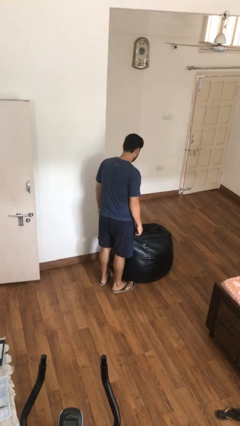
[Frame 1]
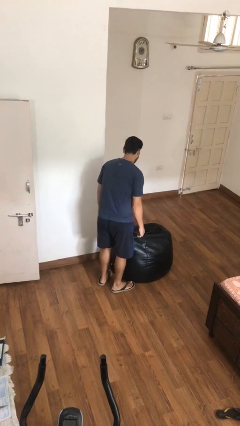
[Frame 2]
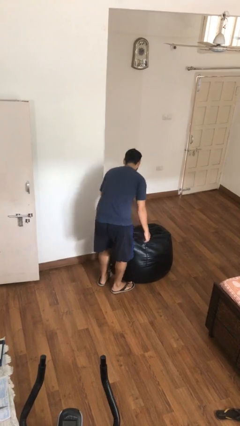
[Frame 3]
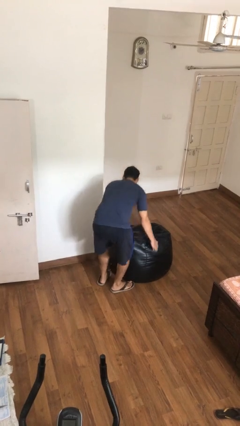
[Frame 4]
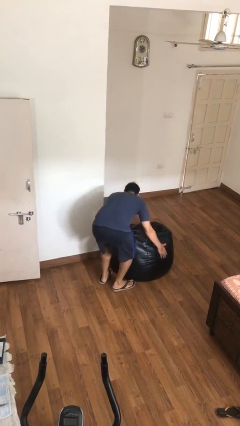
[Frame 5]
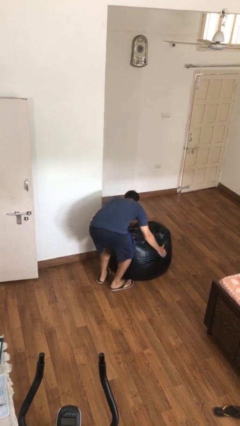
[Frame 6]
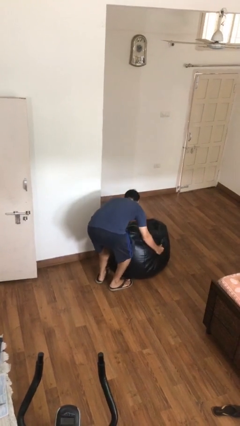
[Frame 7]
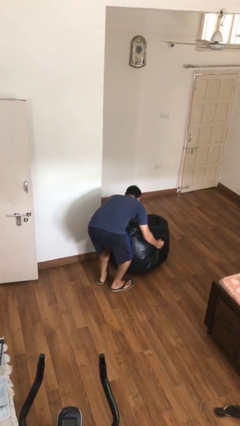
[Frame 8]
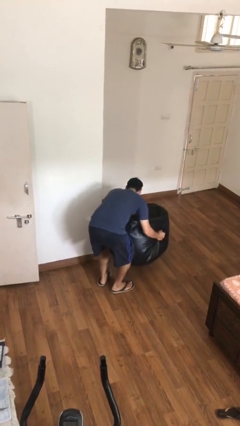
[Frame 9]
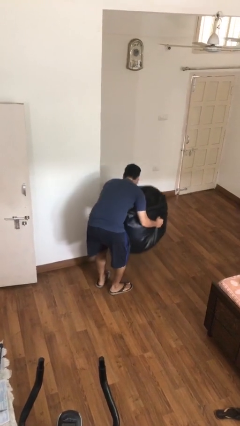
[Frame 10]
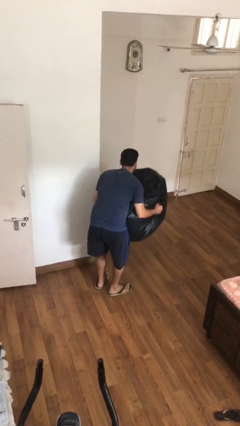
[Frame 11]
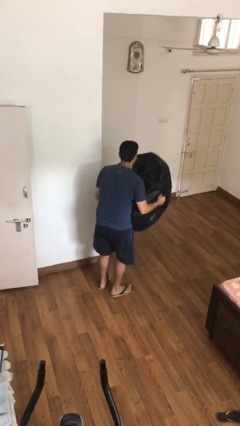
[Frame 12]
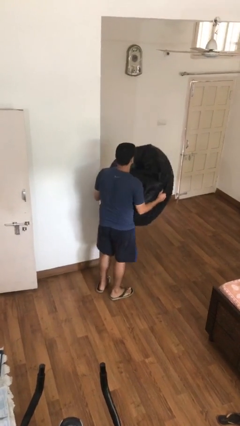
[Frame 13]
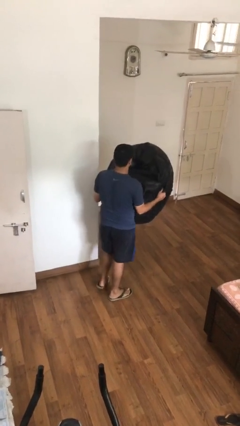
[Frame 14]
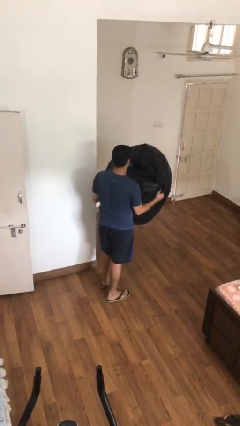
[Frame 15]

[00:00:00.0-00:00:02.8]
person picks up object from floor

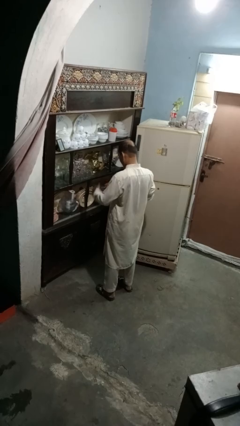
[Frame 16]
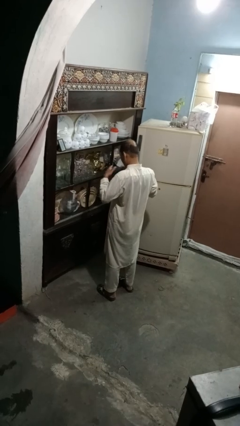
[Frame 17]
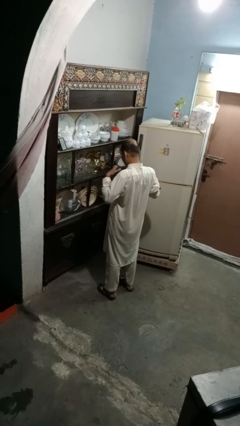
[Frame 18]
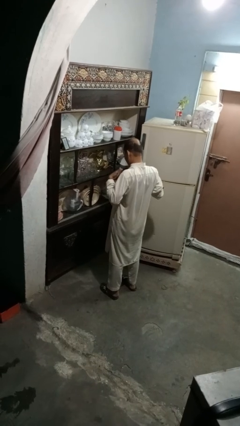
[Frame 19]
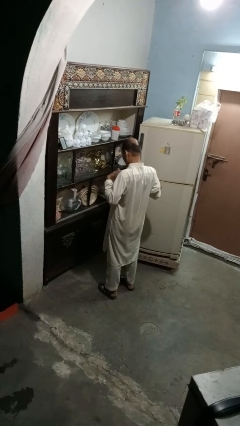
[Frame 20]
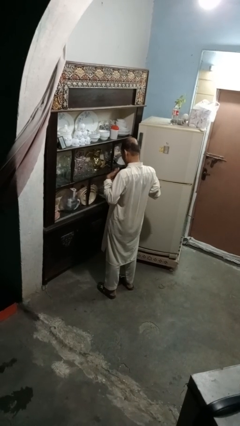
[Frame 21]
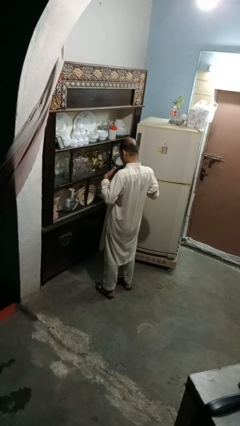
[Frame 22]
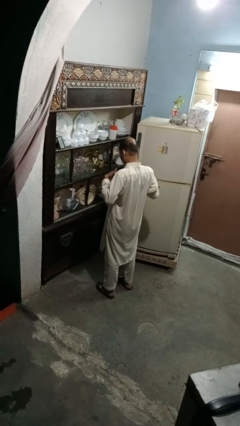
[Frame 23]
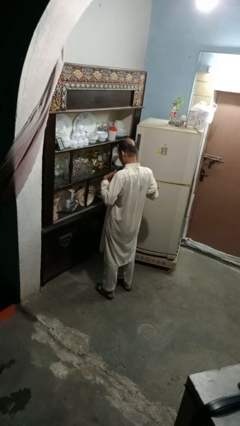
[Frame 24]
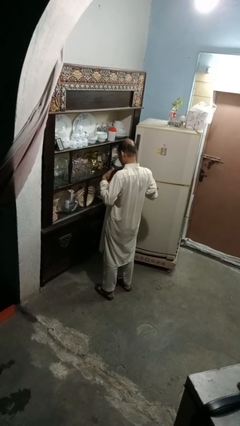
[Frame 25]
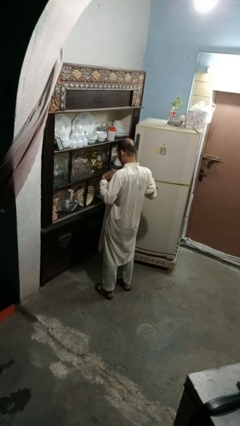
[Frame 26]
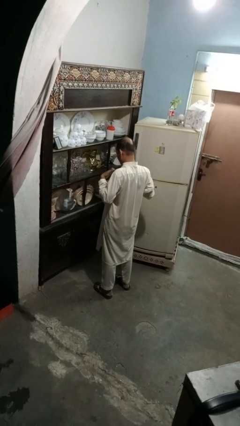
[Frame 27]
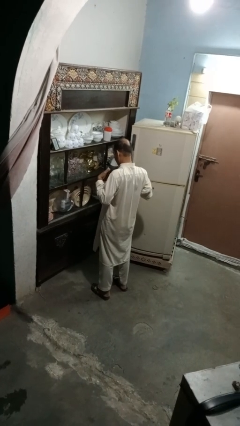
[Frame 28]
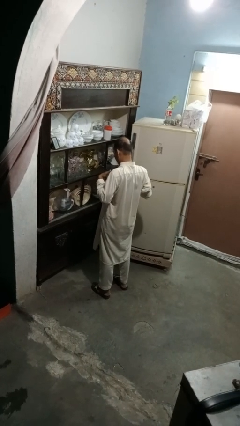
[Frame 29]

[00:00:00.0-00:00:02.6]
person drums on chest

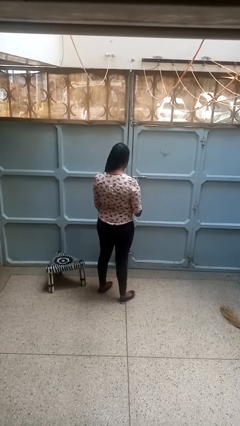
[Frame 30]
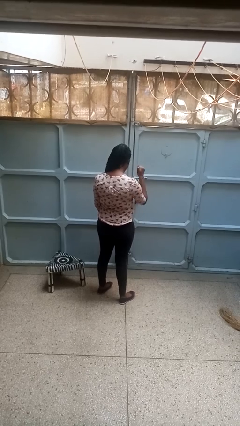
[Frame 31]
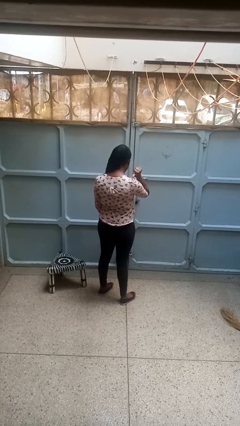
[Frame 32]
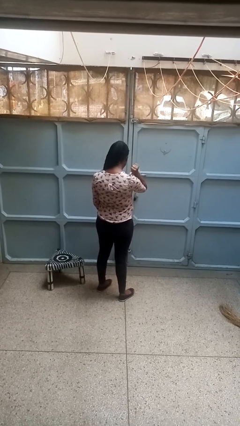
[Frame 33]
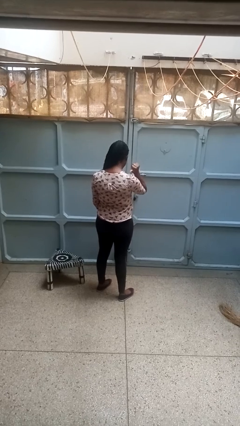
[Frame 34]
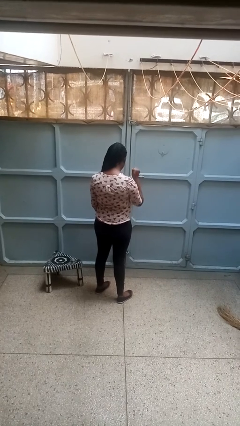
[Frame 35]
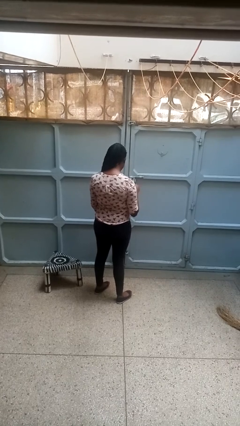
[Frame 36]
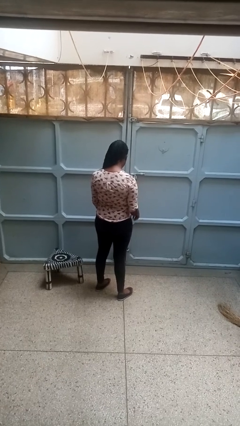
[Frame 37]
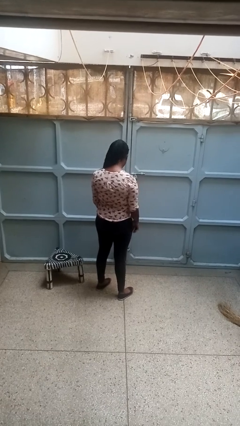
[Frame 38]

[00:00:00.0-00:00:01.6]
person gestures behind me

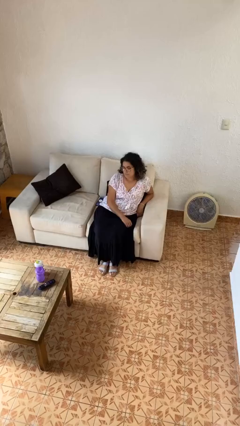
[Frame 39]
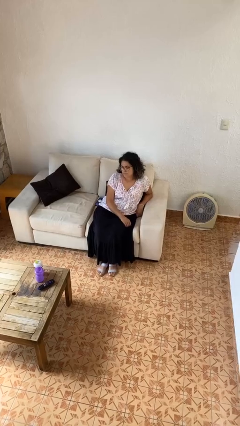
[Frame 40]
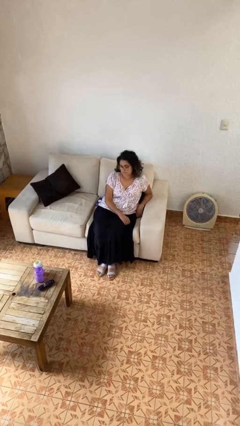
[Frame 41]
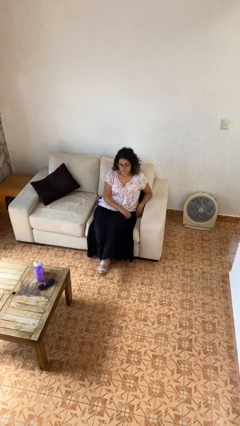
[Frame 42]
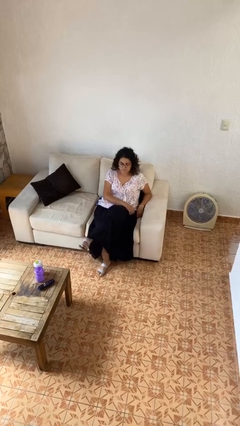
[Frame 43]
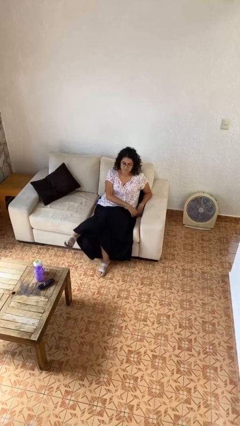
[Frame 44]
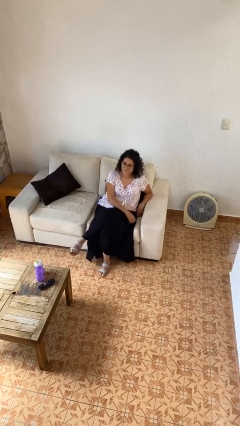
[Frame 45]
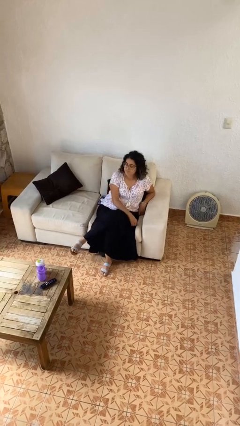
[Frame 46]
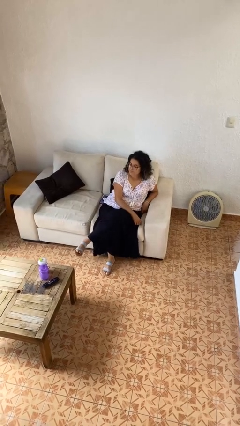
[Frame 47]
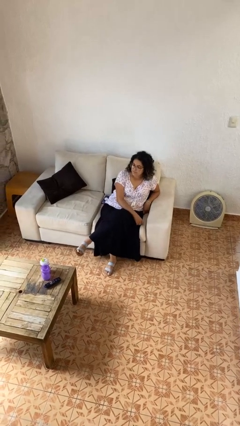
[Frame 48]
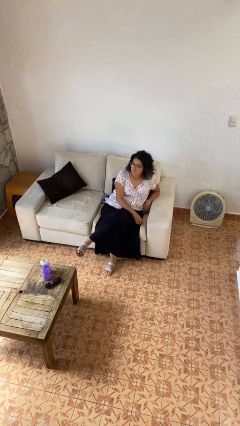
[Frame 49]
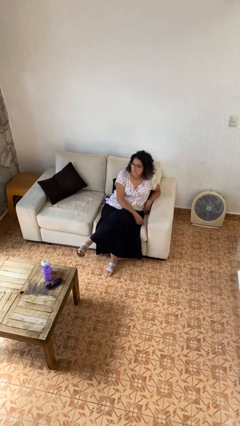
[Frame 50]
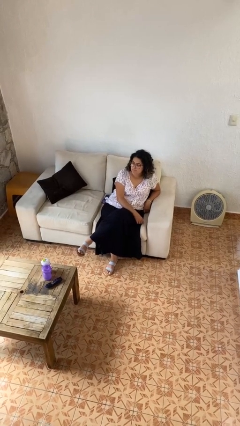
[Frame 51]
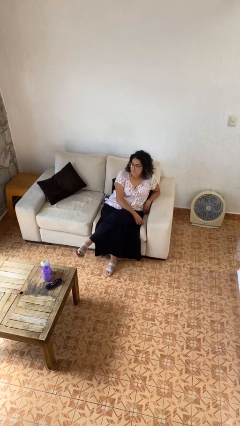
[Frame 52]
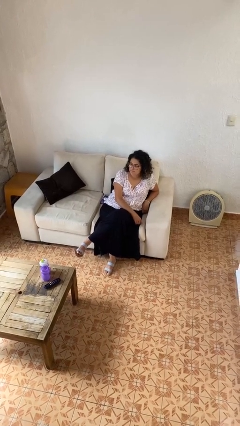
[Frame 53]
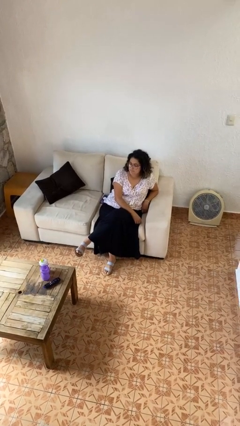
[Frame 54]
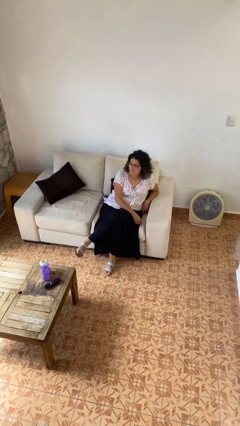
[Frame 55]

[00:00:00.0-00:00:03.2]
person crosses legs

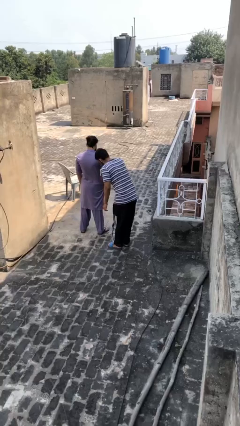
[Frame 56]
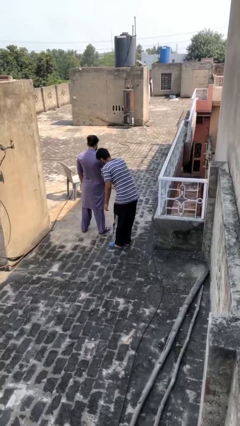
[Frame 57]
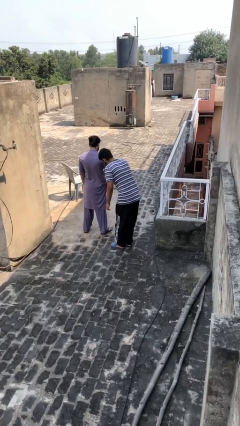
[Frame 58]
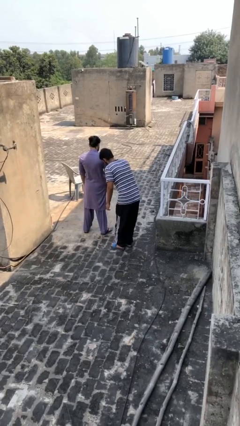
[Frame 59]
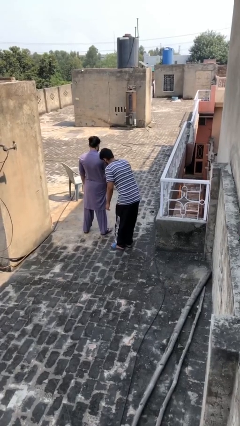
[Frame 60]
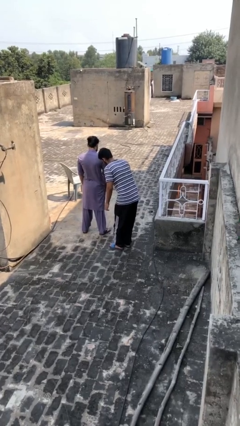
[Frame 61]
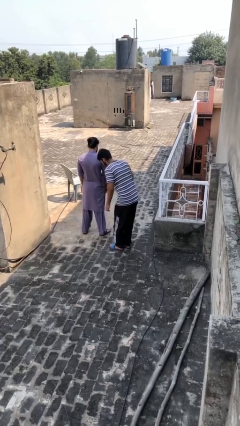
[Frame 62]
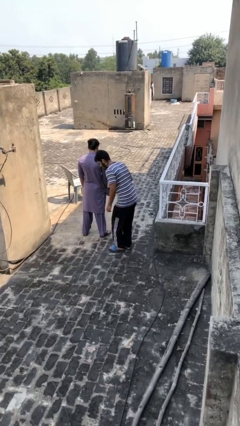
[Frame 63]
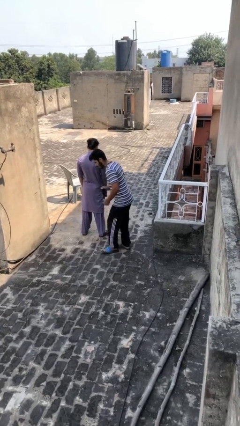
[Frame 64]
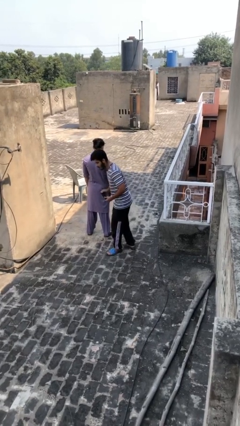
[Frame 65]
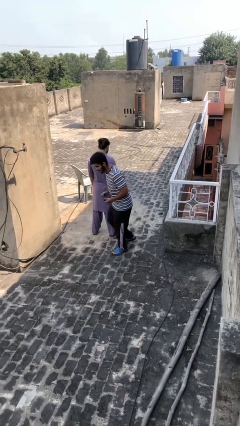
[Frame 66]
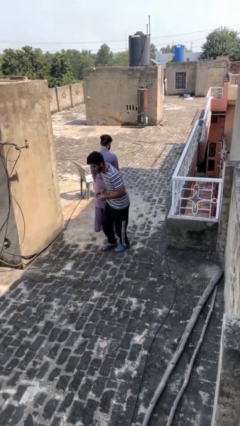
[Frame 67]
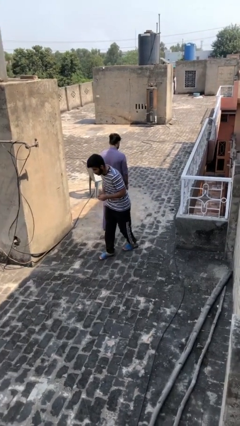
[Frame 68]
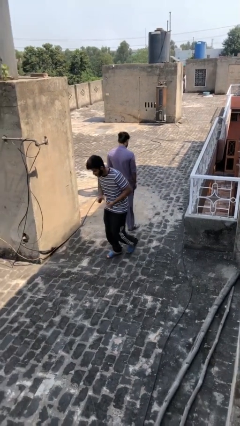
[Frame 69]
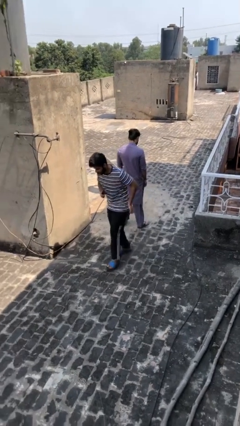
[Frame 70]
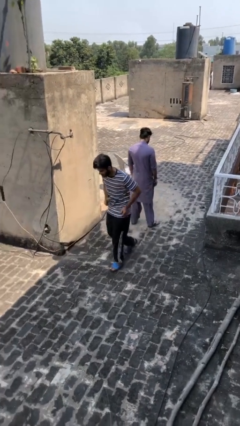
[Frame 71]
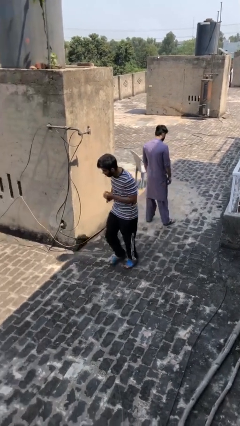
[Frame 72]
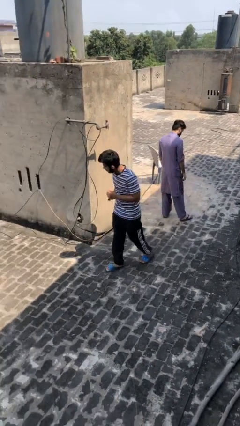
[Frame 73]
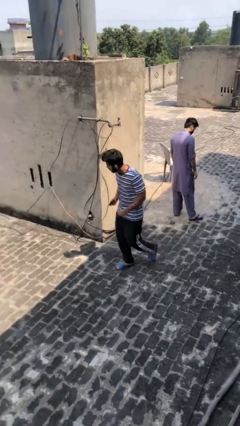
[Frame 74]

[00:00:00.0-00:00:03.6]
person steals object from person

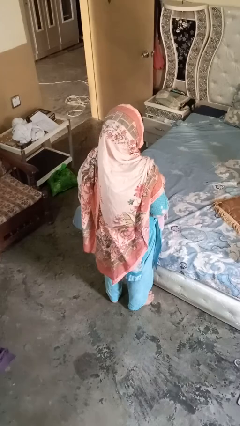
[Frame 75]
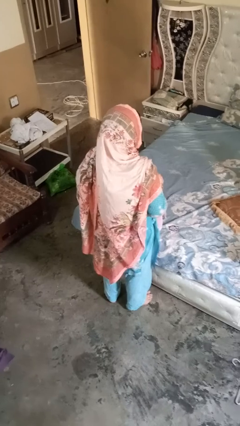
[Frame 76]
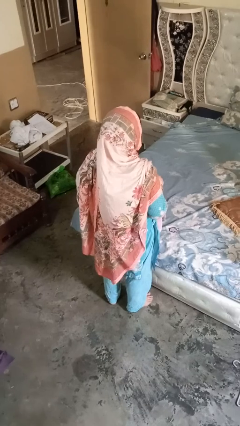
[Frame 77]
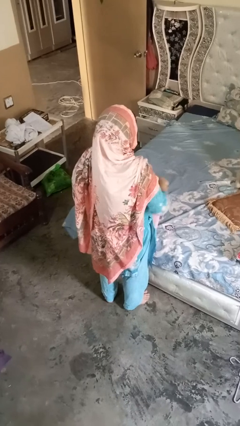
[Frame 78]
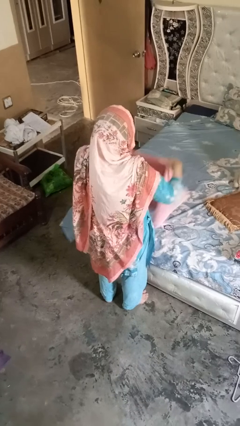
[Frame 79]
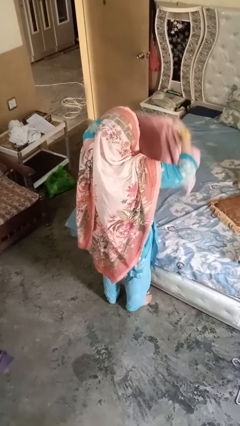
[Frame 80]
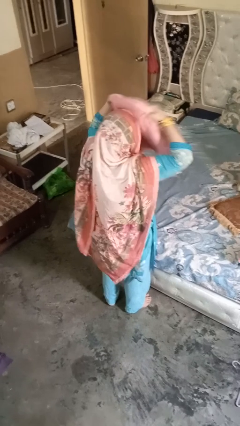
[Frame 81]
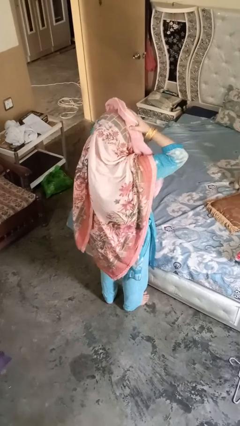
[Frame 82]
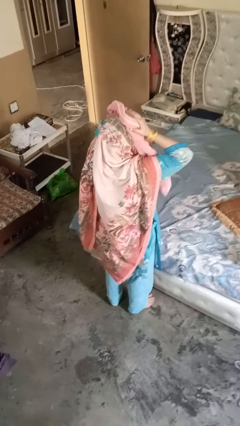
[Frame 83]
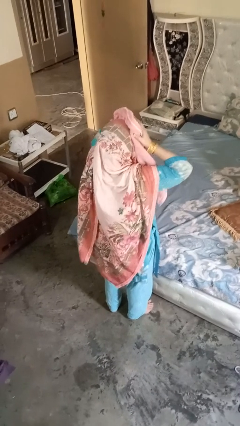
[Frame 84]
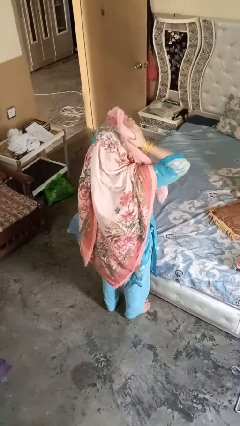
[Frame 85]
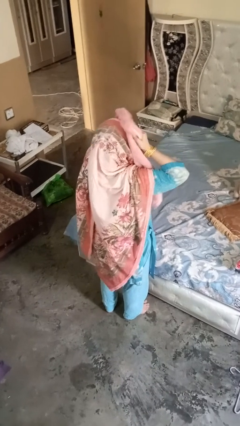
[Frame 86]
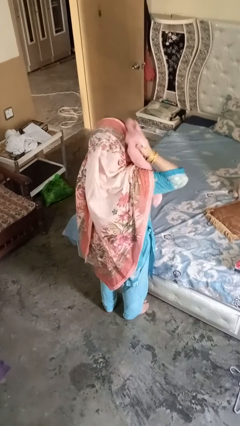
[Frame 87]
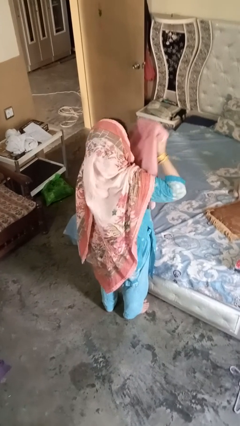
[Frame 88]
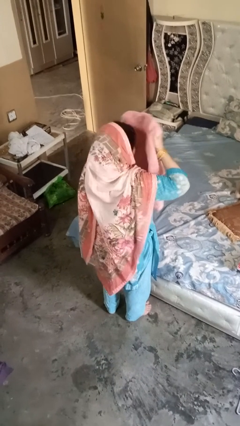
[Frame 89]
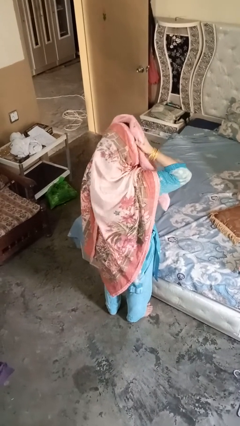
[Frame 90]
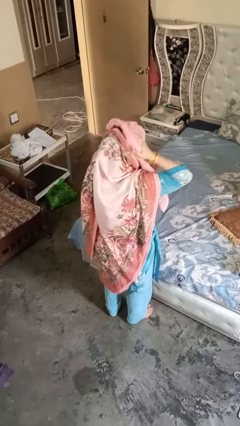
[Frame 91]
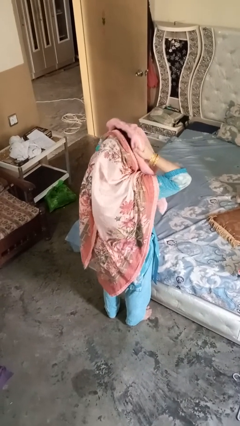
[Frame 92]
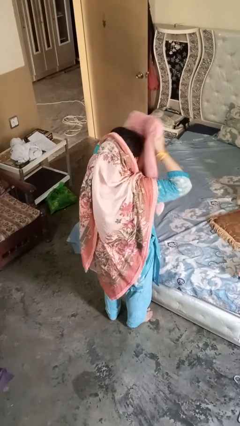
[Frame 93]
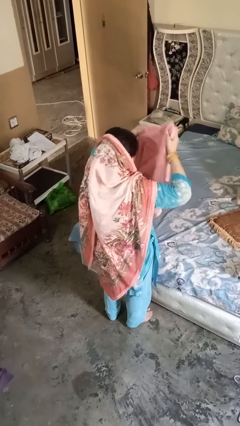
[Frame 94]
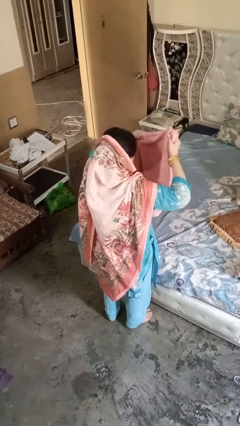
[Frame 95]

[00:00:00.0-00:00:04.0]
person dries hair with towel
